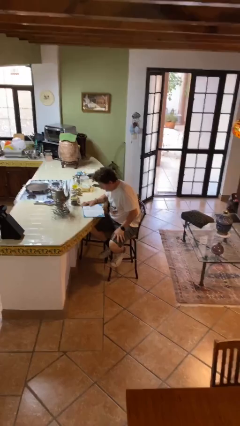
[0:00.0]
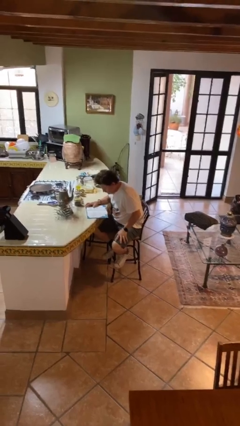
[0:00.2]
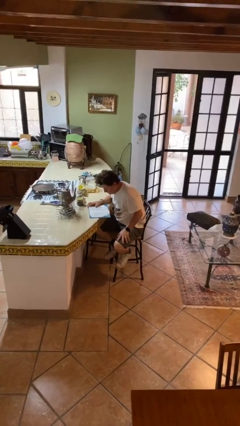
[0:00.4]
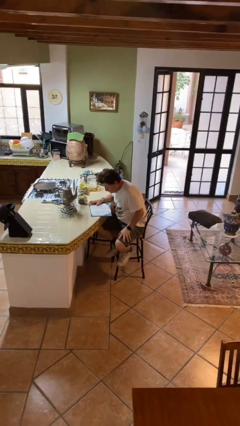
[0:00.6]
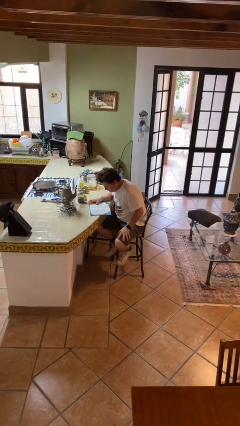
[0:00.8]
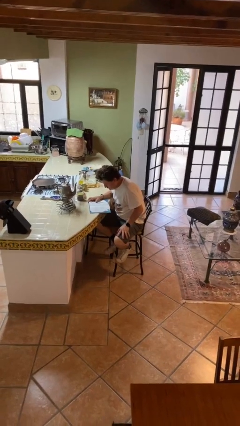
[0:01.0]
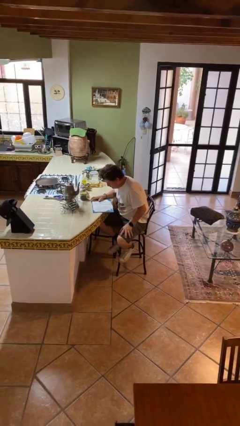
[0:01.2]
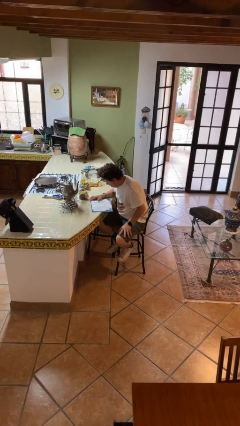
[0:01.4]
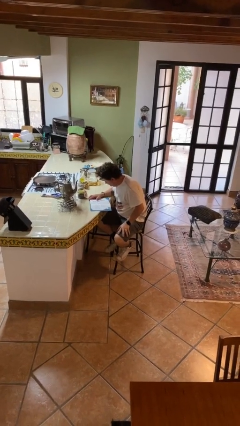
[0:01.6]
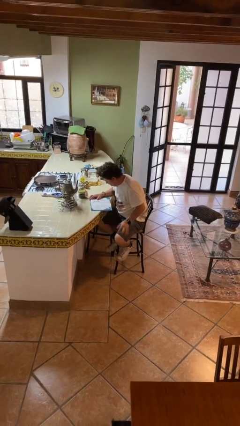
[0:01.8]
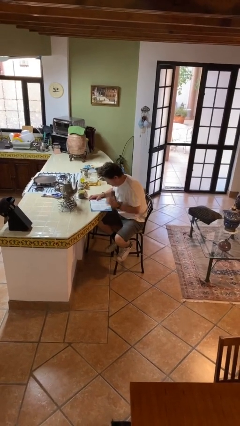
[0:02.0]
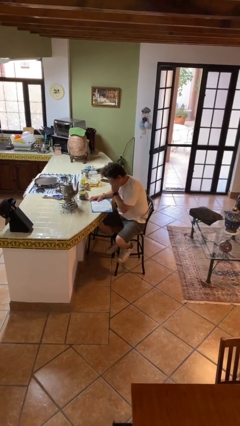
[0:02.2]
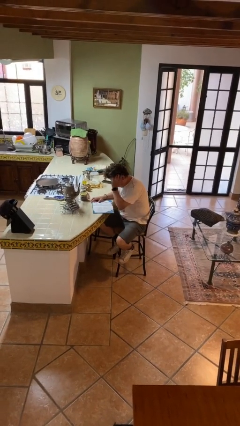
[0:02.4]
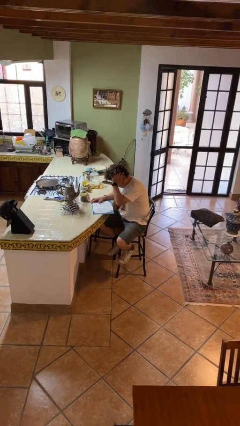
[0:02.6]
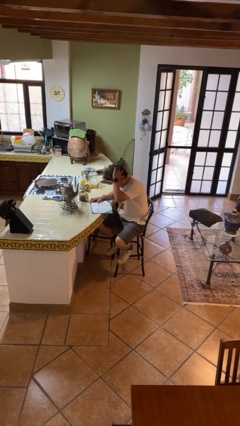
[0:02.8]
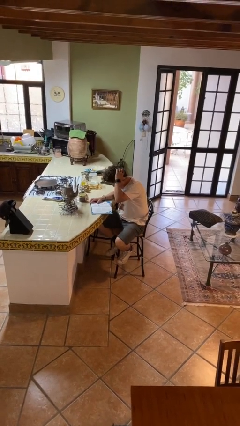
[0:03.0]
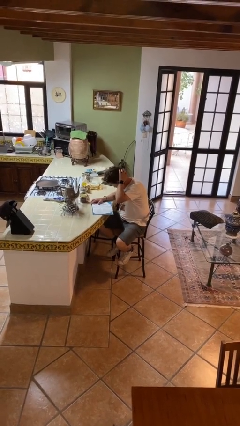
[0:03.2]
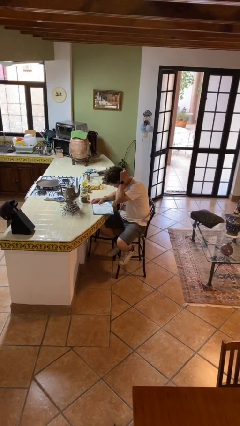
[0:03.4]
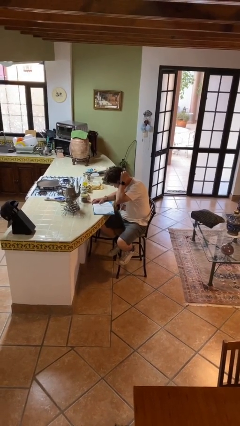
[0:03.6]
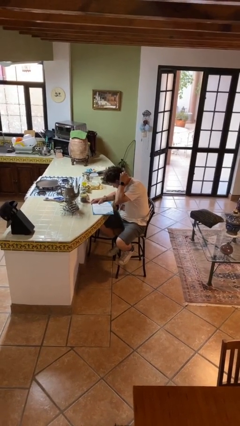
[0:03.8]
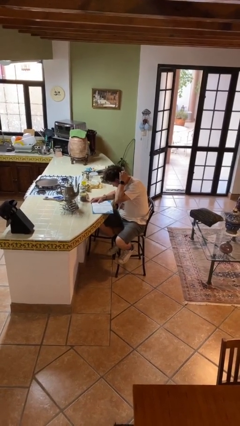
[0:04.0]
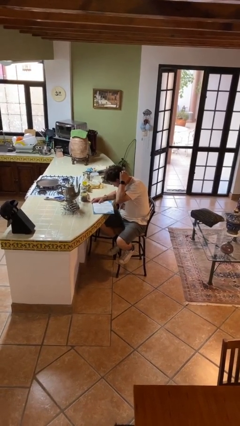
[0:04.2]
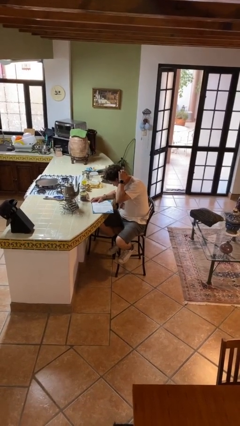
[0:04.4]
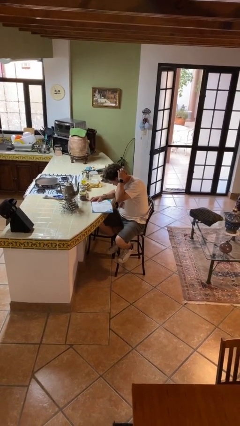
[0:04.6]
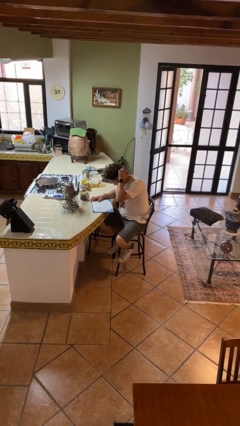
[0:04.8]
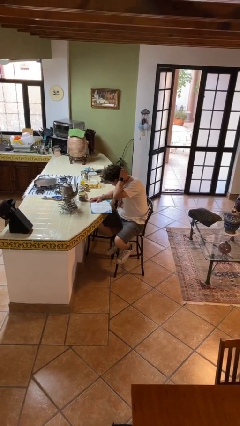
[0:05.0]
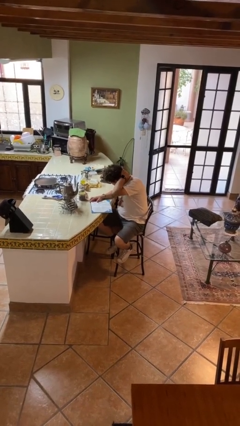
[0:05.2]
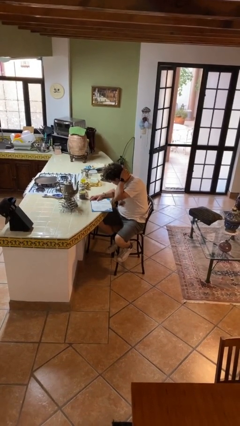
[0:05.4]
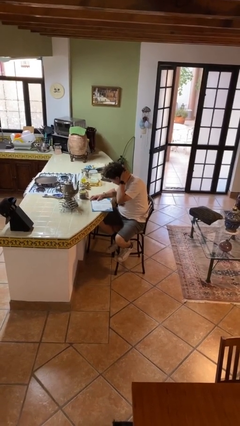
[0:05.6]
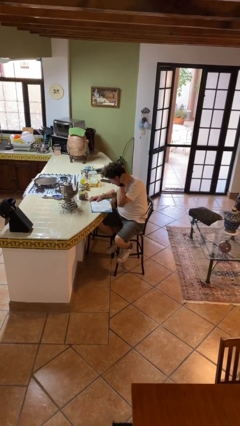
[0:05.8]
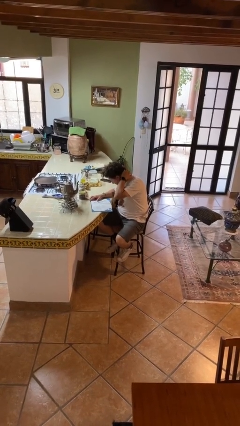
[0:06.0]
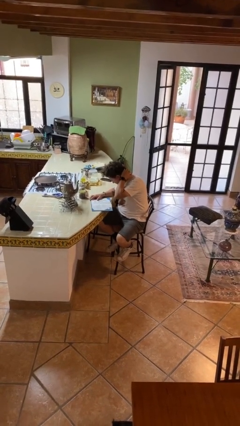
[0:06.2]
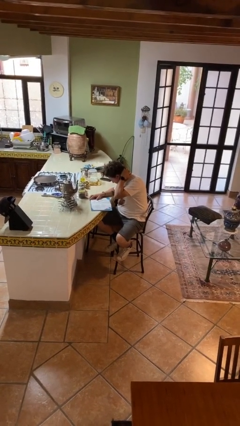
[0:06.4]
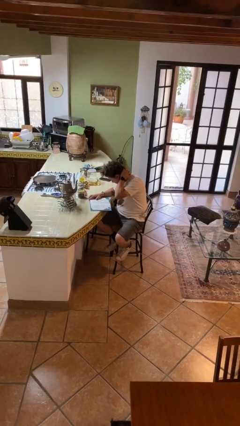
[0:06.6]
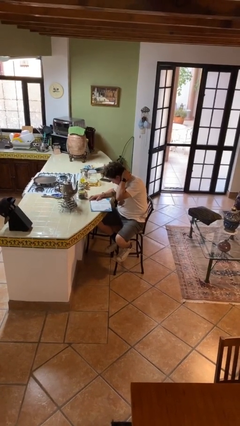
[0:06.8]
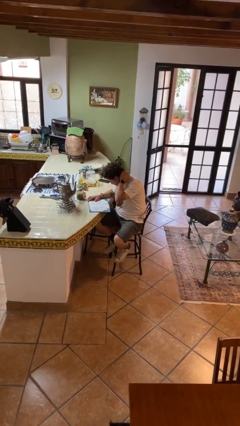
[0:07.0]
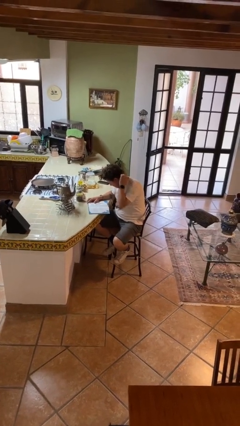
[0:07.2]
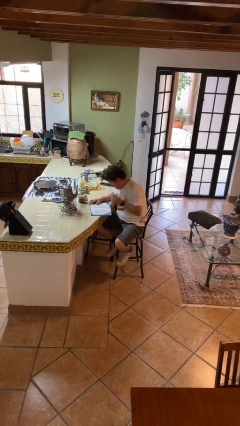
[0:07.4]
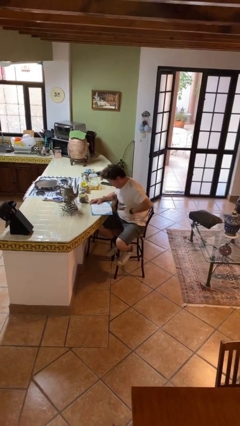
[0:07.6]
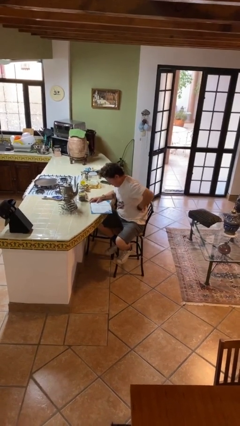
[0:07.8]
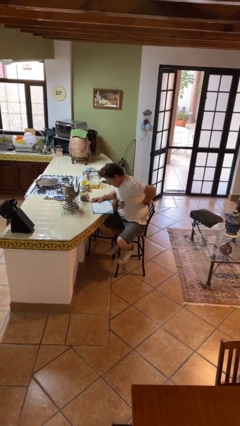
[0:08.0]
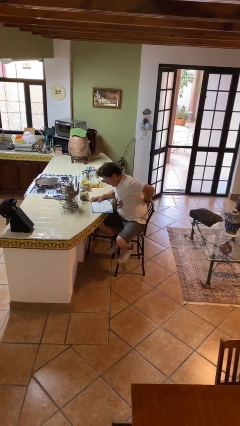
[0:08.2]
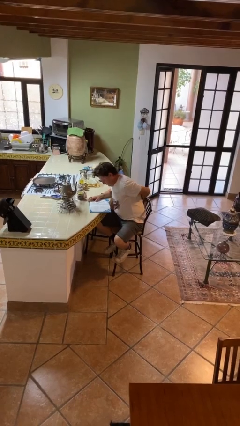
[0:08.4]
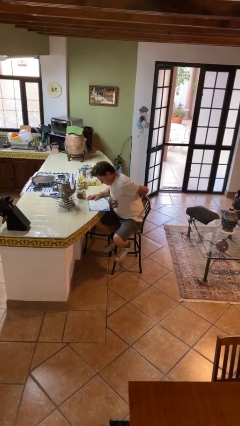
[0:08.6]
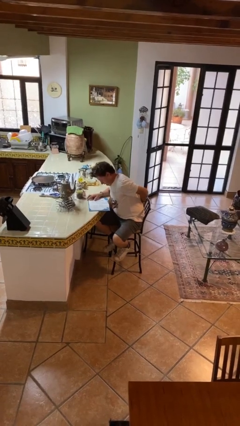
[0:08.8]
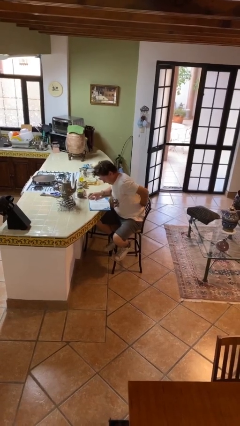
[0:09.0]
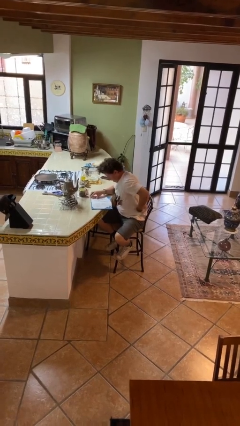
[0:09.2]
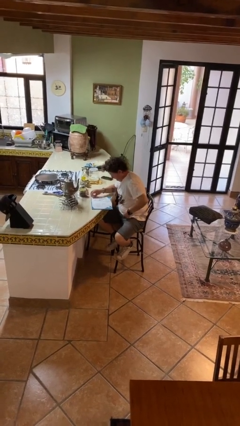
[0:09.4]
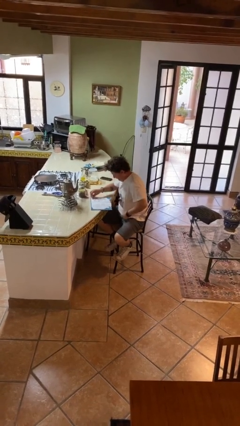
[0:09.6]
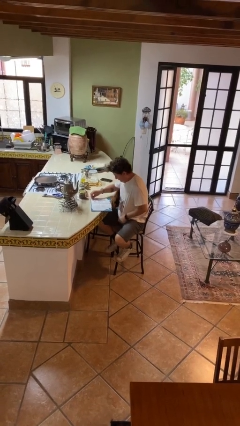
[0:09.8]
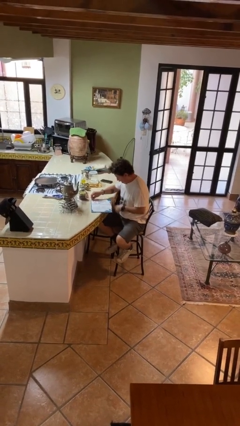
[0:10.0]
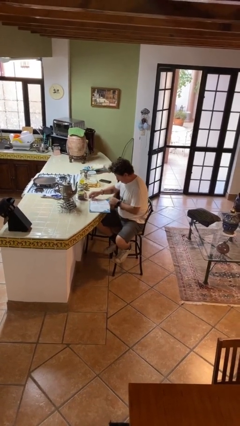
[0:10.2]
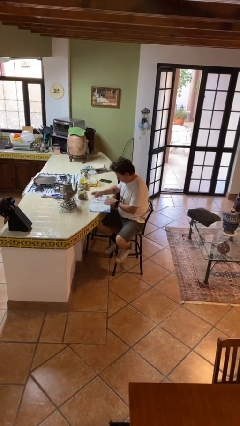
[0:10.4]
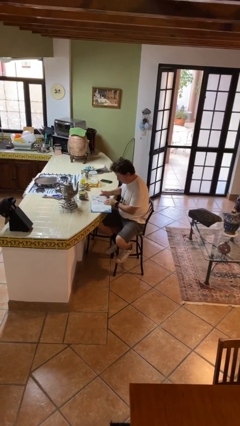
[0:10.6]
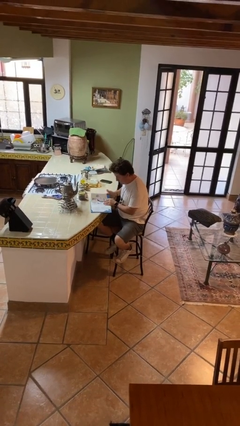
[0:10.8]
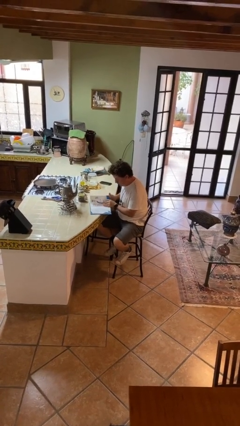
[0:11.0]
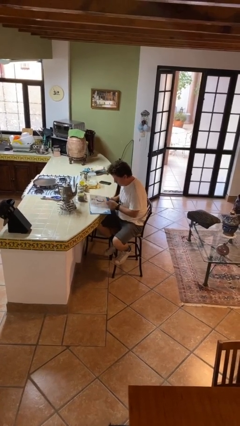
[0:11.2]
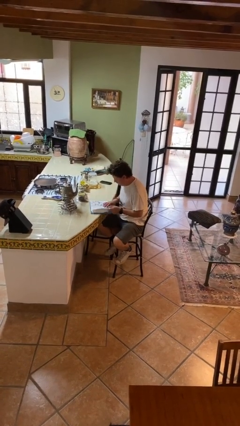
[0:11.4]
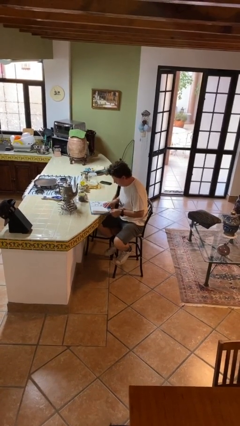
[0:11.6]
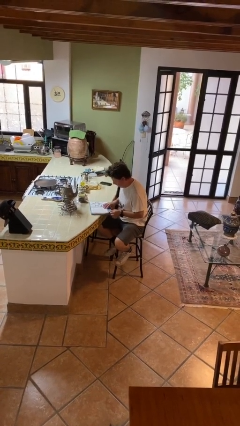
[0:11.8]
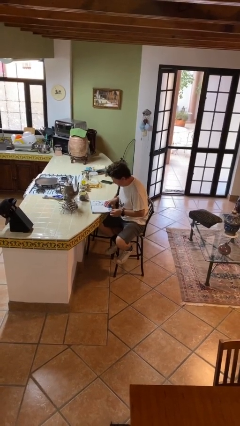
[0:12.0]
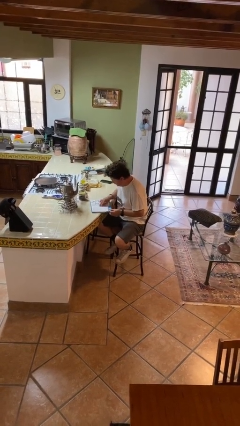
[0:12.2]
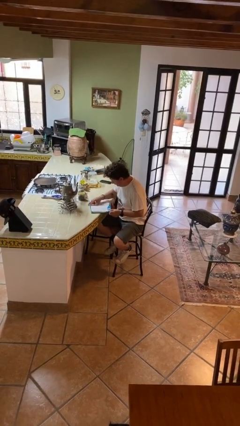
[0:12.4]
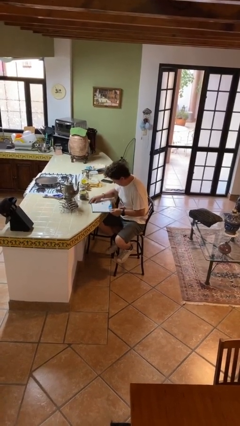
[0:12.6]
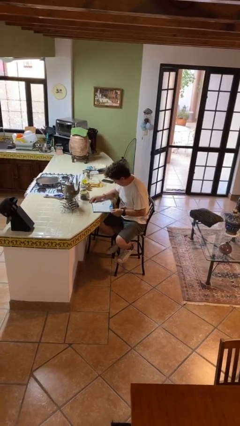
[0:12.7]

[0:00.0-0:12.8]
person reads document

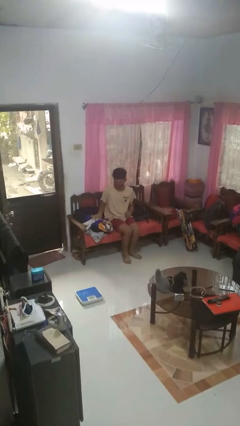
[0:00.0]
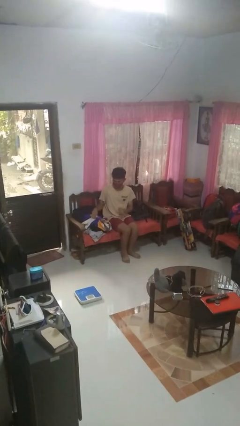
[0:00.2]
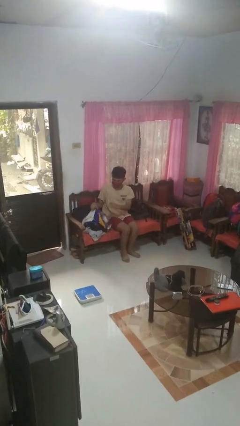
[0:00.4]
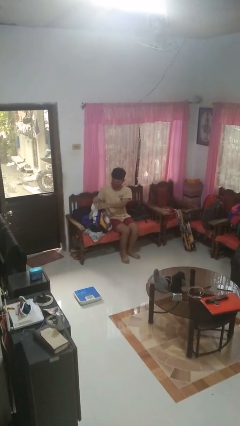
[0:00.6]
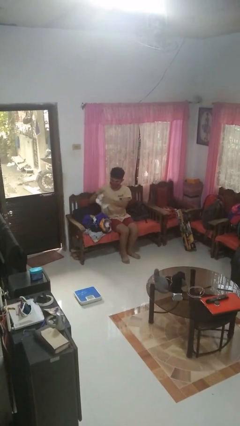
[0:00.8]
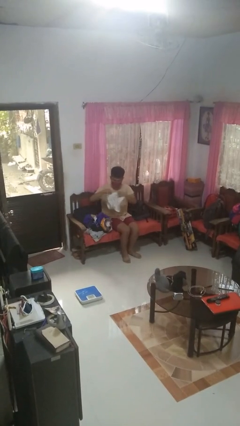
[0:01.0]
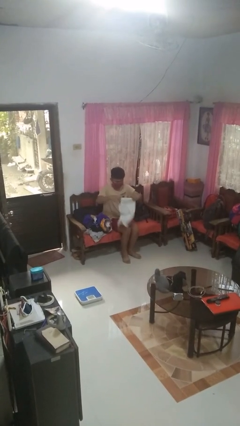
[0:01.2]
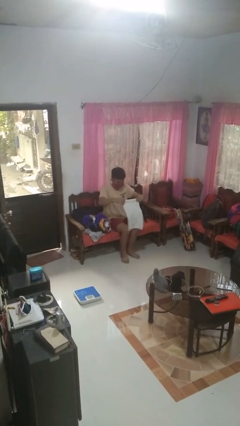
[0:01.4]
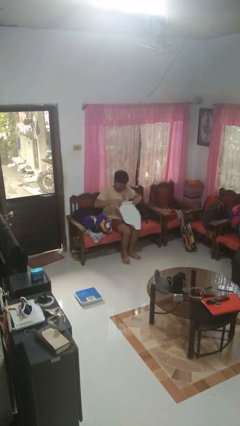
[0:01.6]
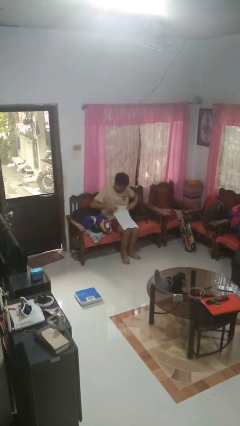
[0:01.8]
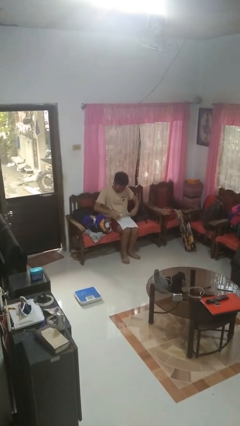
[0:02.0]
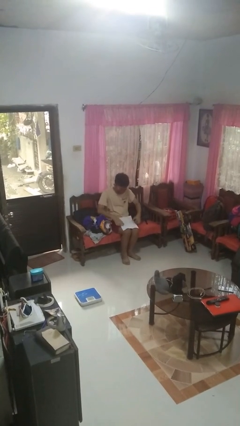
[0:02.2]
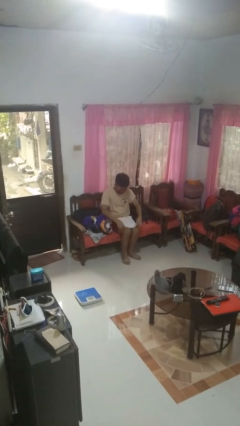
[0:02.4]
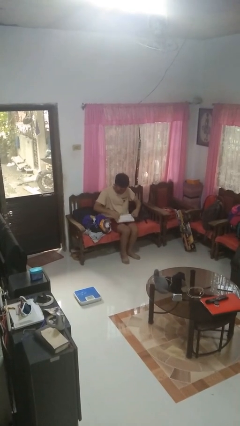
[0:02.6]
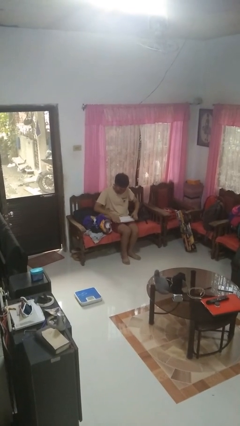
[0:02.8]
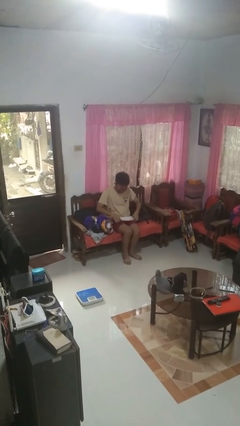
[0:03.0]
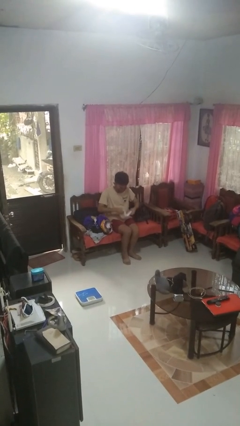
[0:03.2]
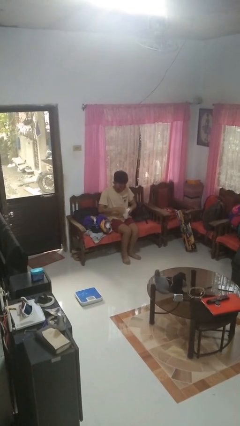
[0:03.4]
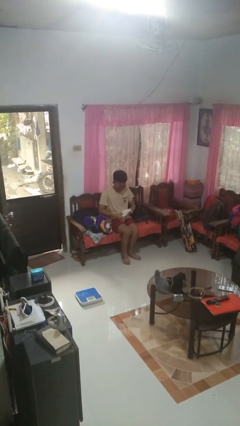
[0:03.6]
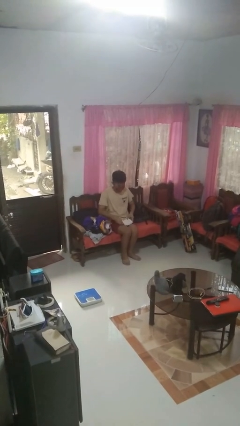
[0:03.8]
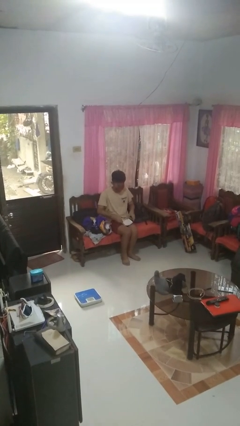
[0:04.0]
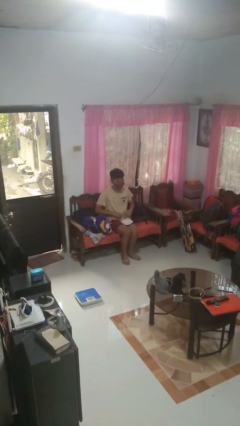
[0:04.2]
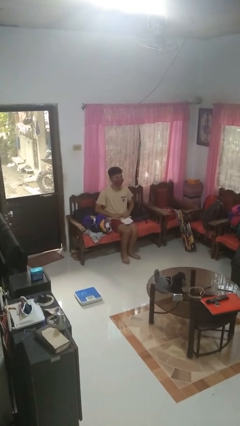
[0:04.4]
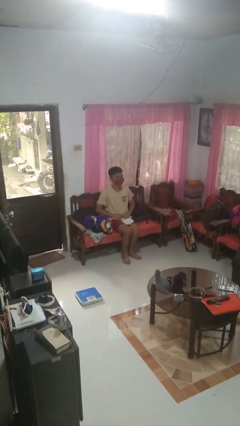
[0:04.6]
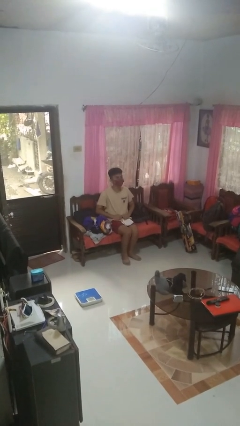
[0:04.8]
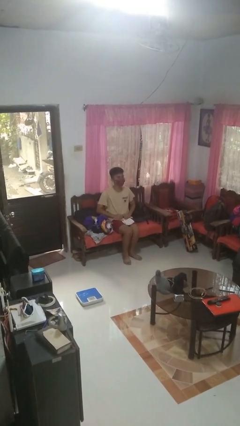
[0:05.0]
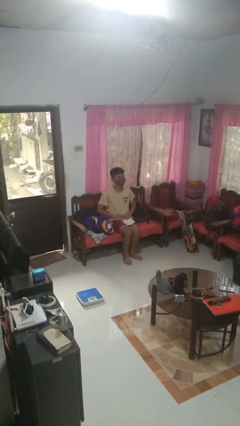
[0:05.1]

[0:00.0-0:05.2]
person folds towel

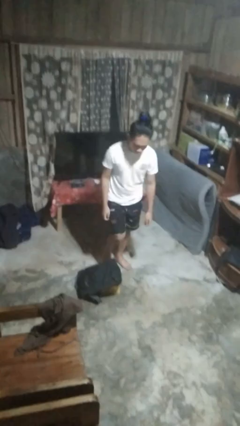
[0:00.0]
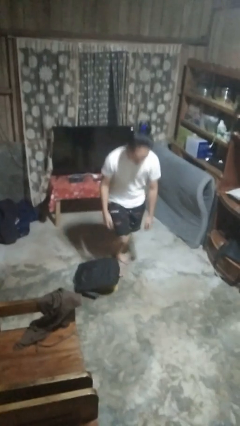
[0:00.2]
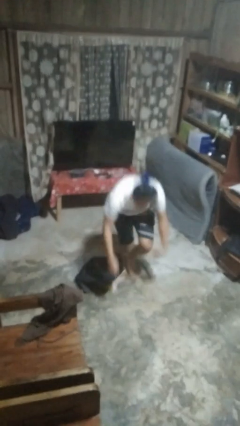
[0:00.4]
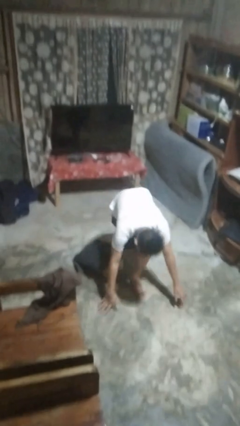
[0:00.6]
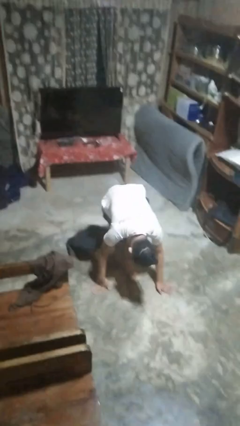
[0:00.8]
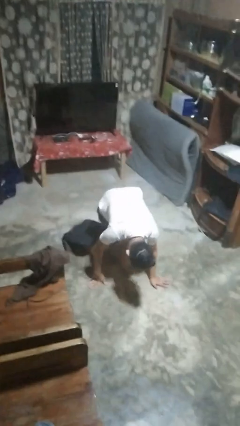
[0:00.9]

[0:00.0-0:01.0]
person trips on object on floor
